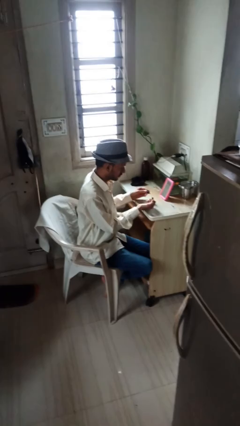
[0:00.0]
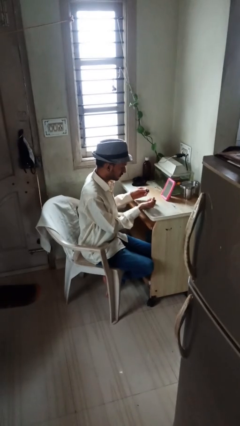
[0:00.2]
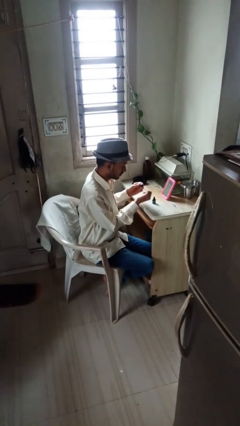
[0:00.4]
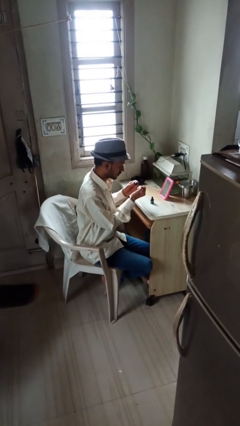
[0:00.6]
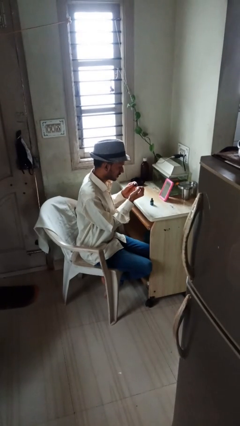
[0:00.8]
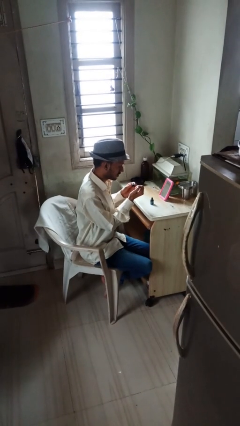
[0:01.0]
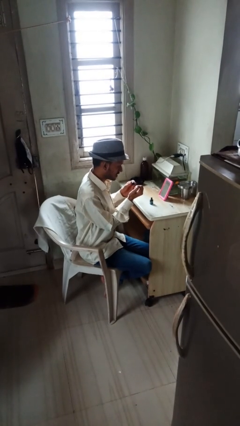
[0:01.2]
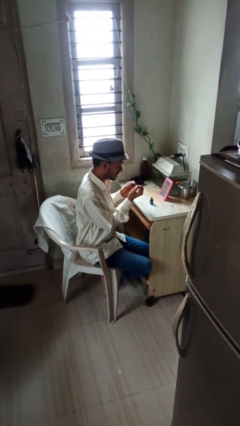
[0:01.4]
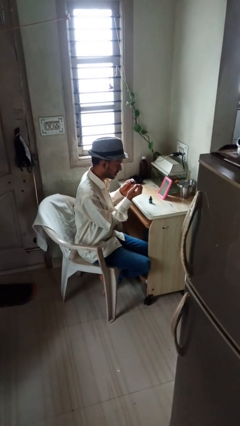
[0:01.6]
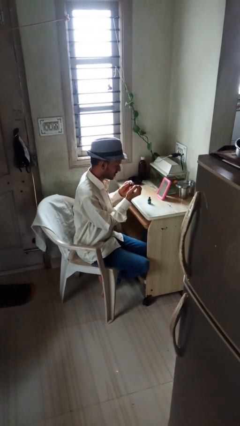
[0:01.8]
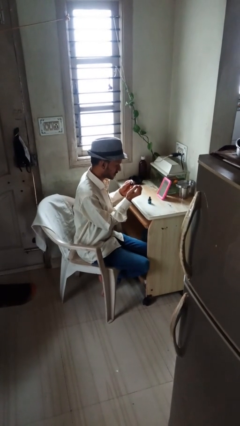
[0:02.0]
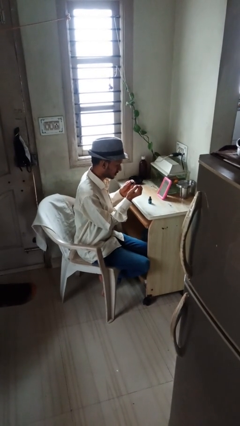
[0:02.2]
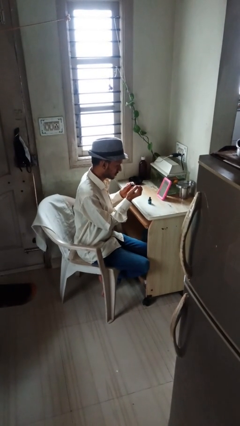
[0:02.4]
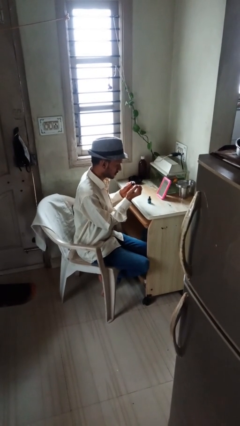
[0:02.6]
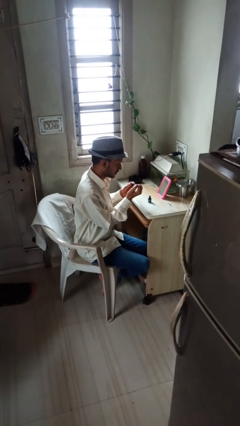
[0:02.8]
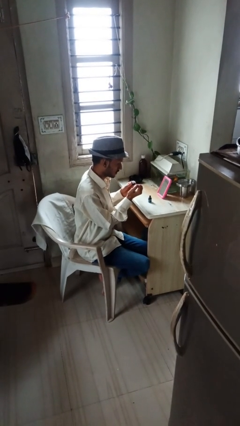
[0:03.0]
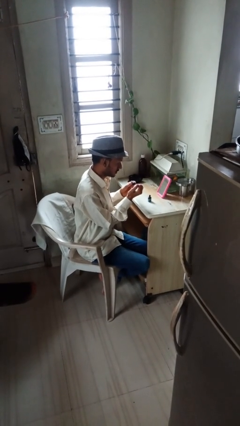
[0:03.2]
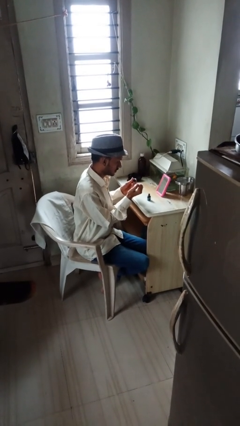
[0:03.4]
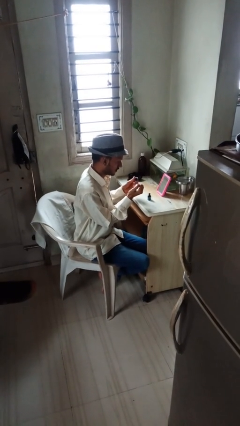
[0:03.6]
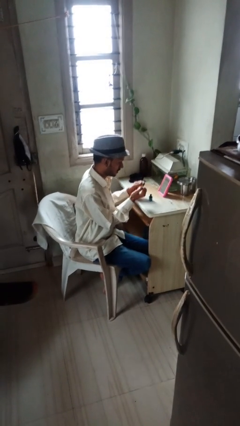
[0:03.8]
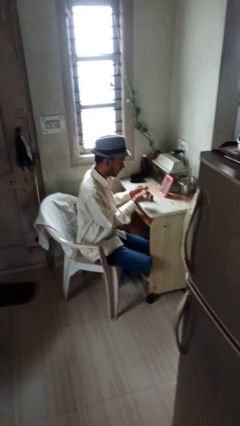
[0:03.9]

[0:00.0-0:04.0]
person paints fingernails

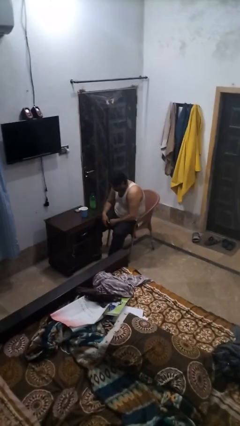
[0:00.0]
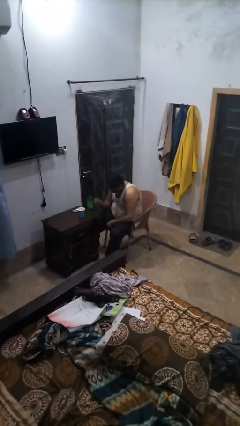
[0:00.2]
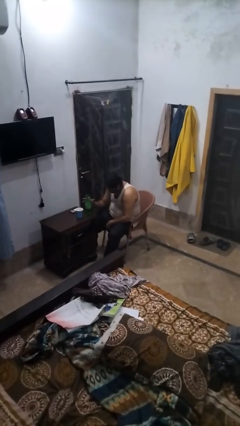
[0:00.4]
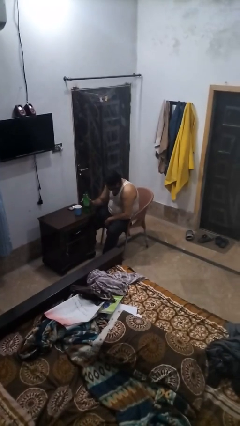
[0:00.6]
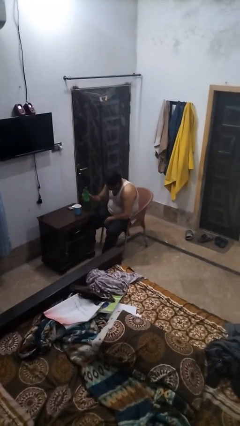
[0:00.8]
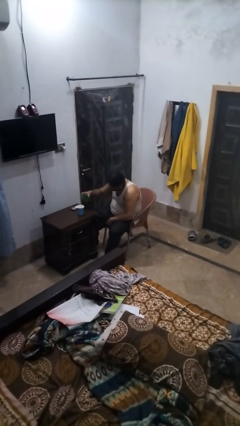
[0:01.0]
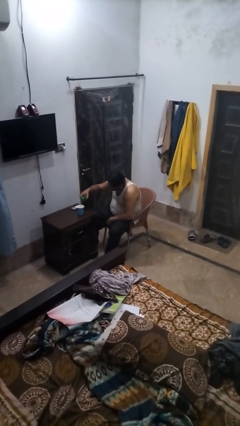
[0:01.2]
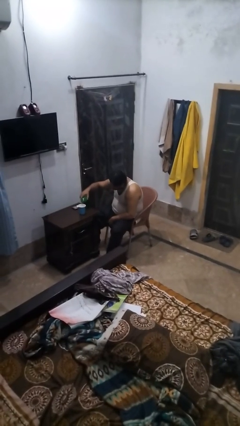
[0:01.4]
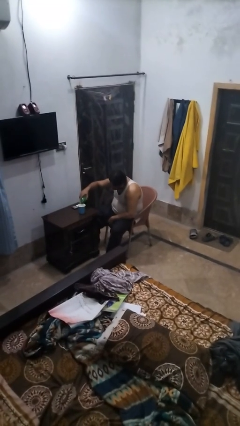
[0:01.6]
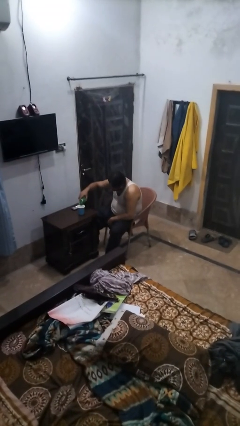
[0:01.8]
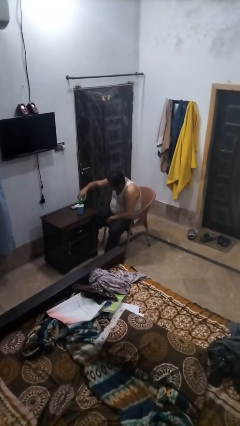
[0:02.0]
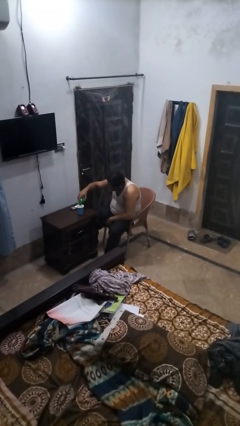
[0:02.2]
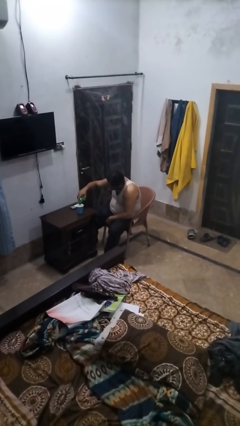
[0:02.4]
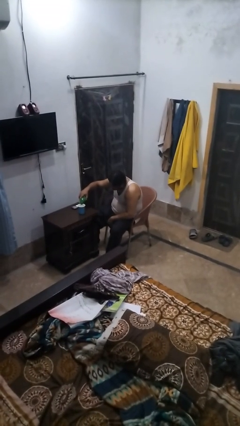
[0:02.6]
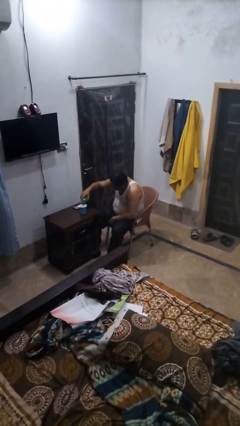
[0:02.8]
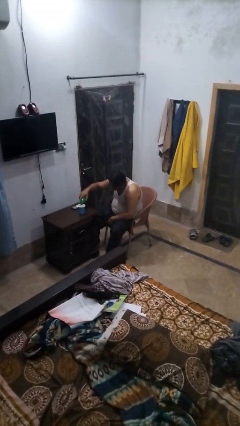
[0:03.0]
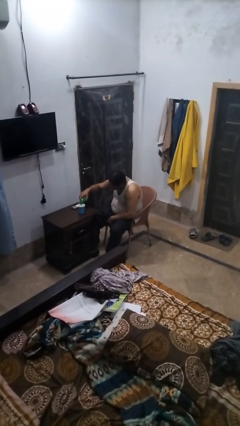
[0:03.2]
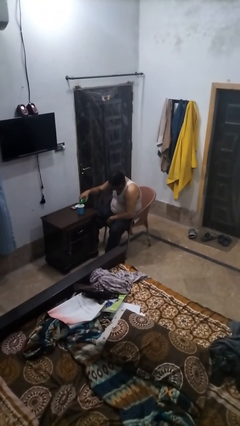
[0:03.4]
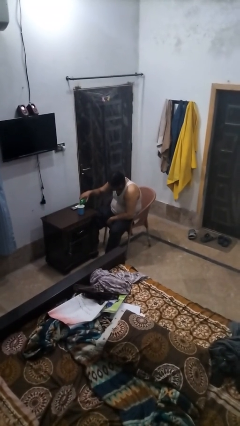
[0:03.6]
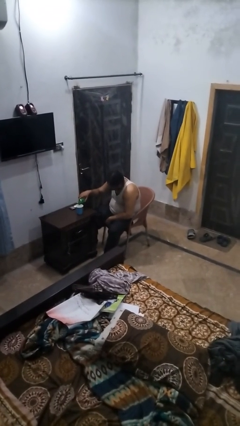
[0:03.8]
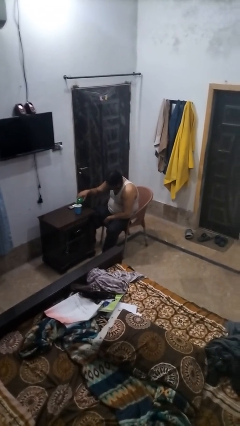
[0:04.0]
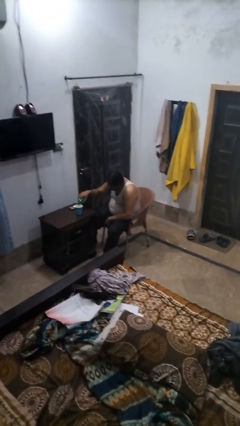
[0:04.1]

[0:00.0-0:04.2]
person pours liquid into cup

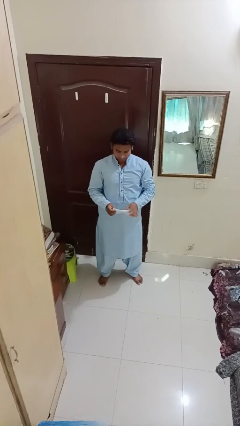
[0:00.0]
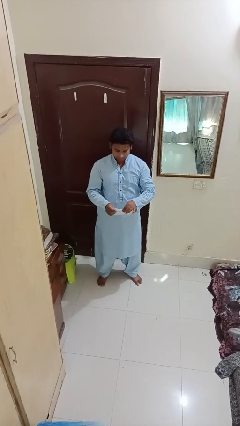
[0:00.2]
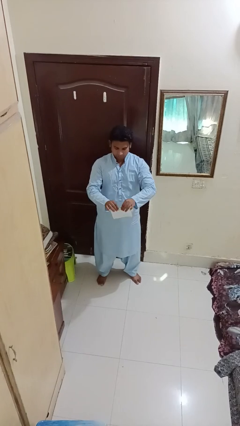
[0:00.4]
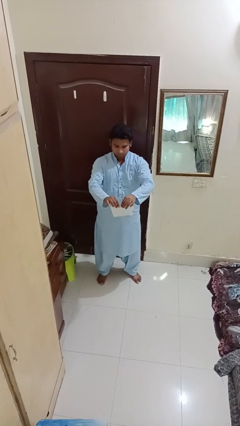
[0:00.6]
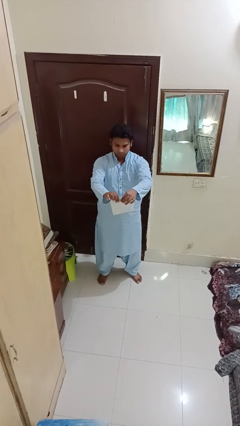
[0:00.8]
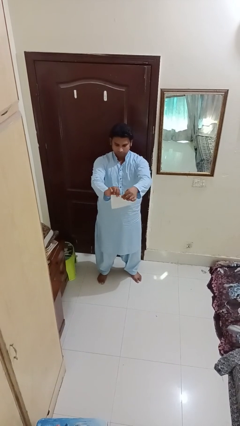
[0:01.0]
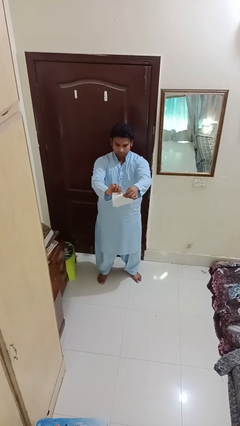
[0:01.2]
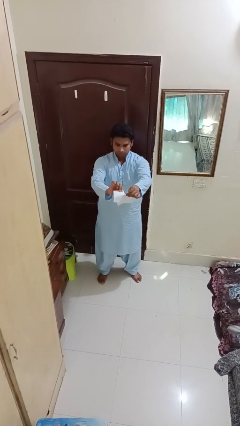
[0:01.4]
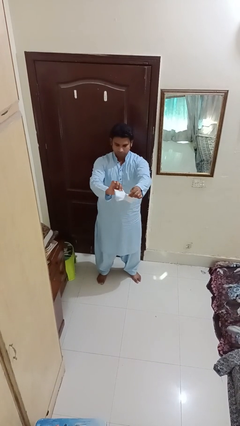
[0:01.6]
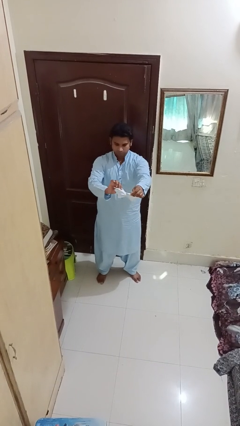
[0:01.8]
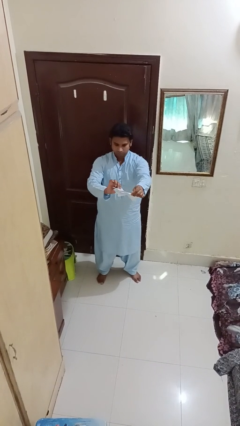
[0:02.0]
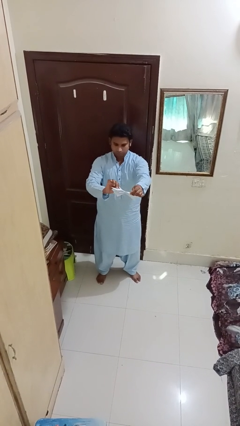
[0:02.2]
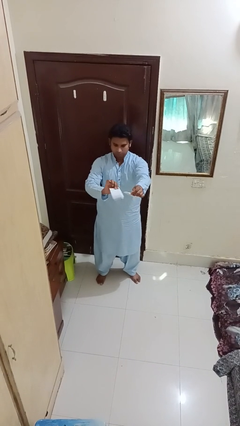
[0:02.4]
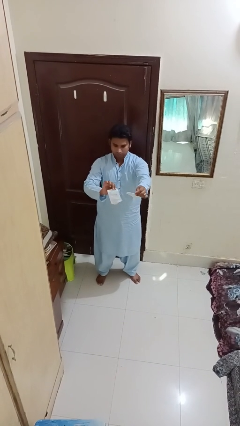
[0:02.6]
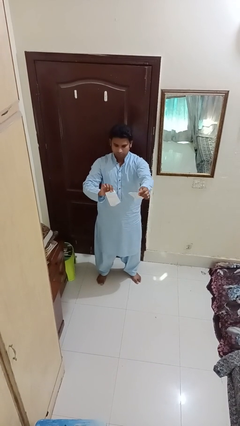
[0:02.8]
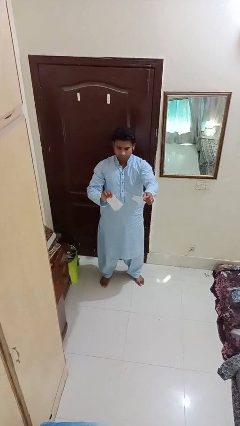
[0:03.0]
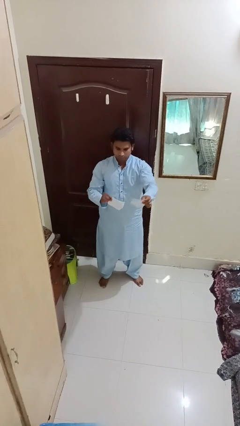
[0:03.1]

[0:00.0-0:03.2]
person tears paper

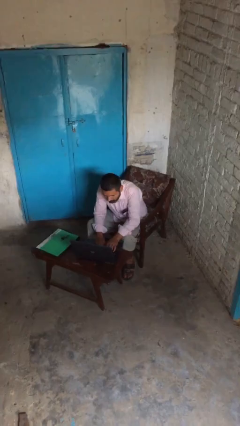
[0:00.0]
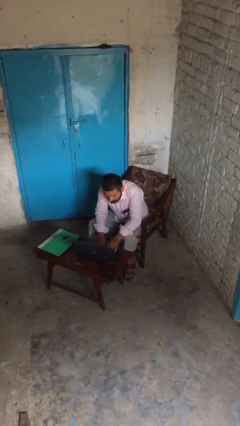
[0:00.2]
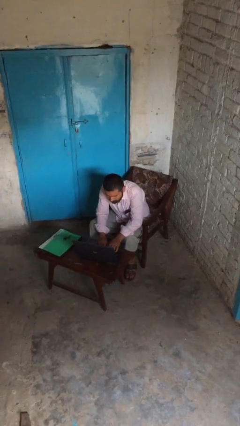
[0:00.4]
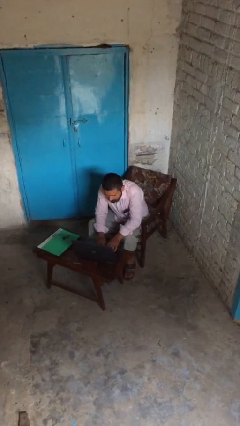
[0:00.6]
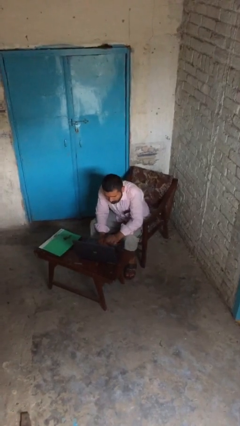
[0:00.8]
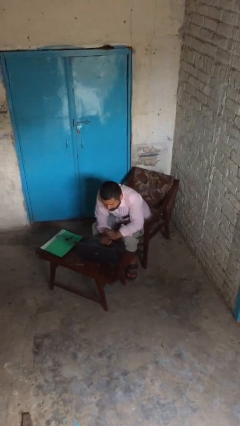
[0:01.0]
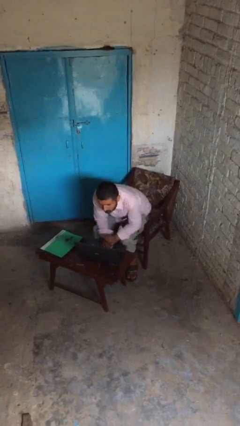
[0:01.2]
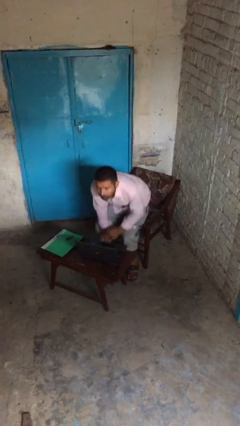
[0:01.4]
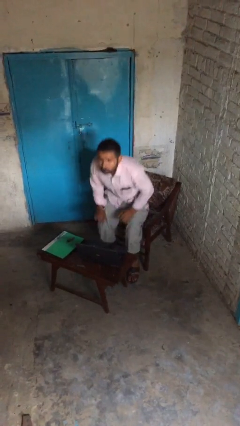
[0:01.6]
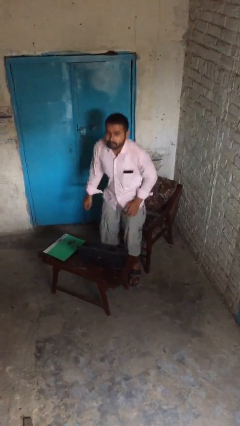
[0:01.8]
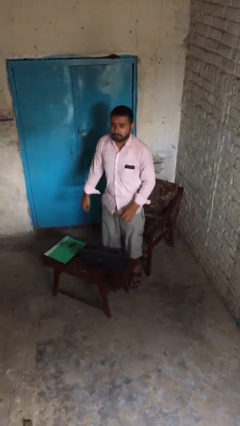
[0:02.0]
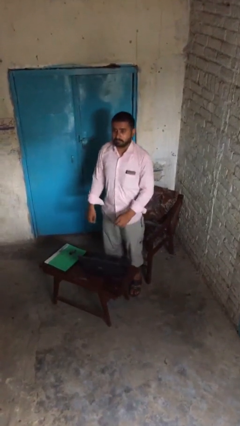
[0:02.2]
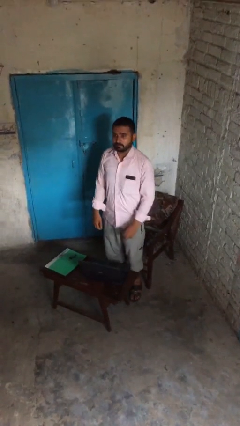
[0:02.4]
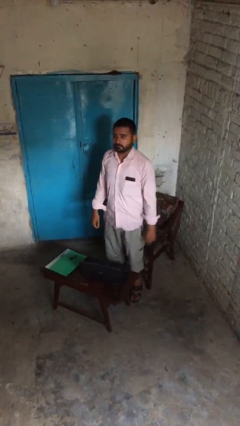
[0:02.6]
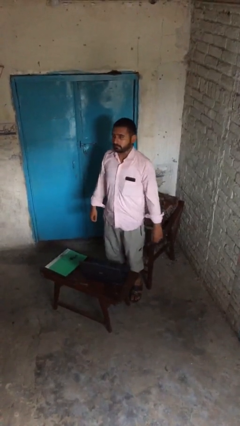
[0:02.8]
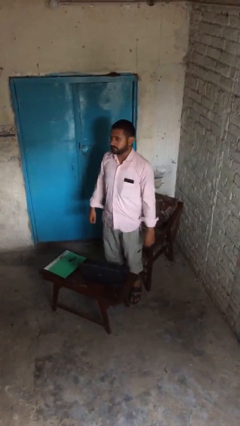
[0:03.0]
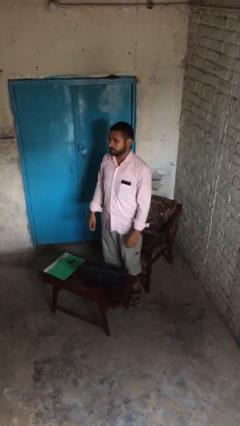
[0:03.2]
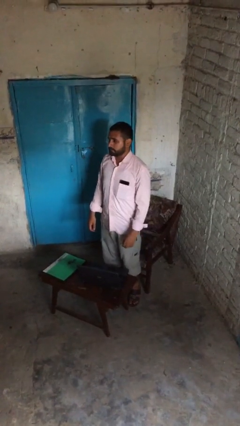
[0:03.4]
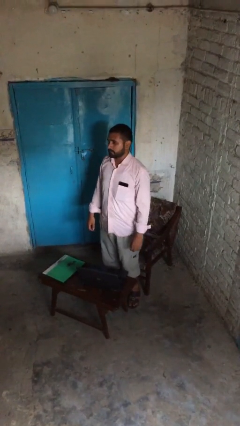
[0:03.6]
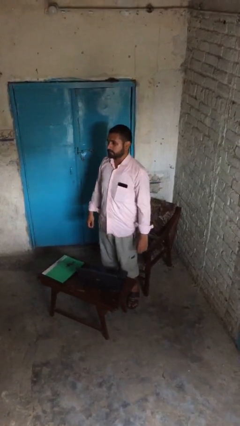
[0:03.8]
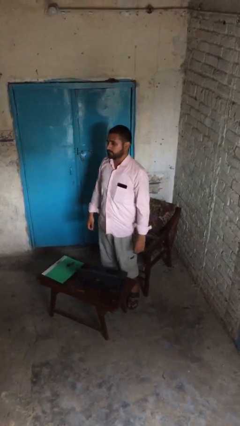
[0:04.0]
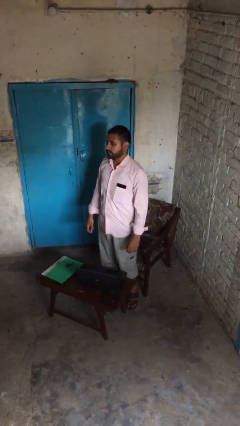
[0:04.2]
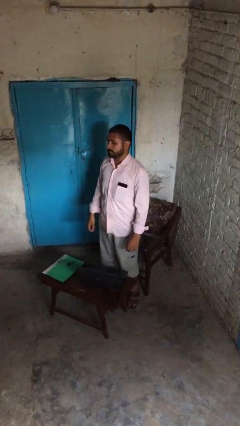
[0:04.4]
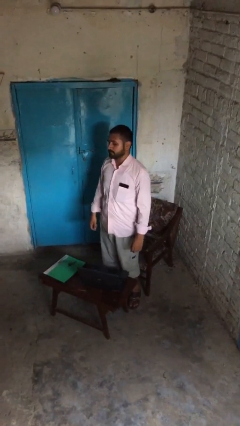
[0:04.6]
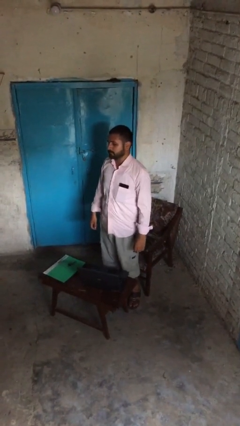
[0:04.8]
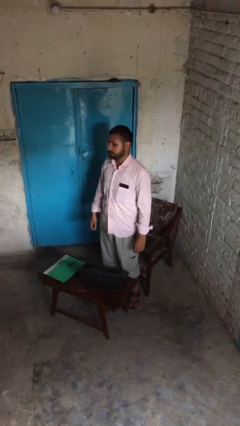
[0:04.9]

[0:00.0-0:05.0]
person stands up

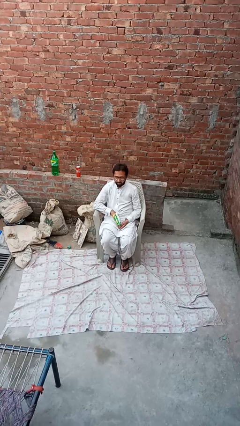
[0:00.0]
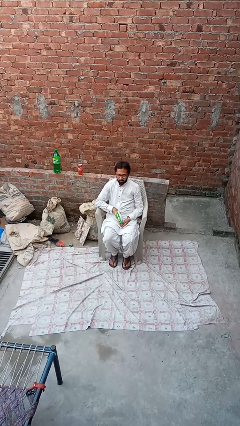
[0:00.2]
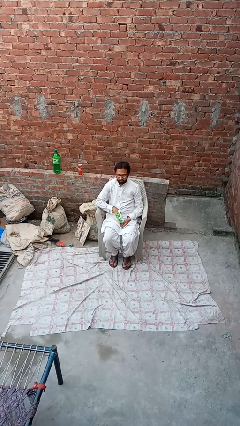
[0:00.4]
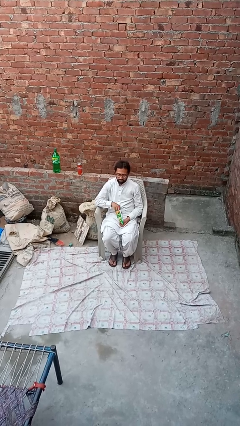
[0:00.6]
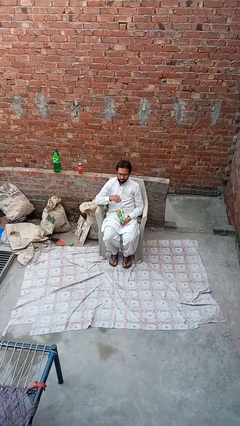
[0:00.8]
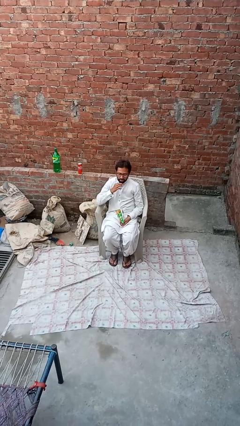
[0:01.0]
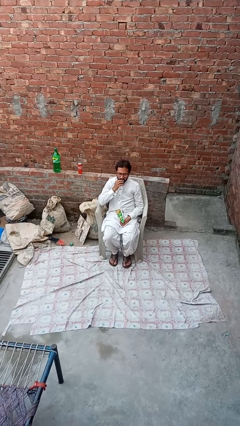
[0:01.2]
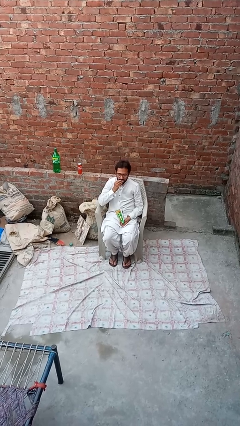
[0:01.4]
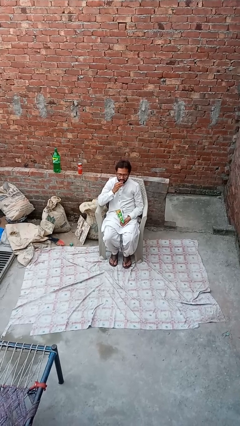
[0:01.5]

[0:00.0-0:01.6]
person eats snack from bag
